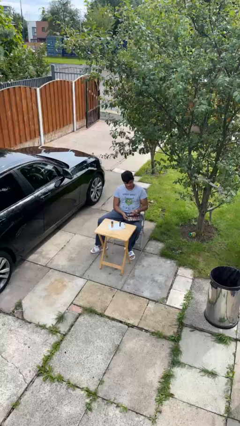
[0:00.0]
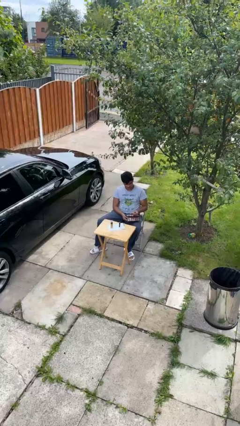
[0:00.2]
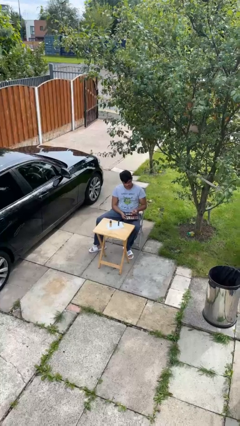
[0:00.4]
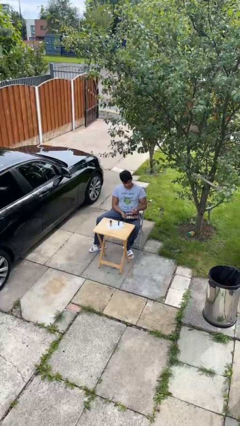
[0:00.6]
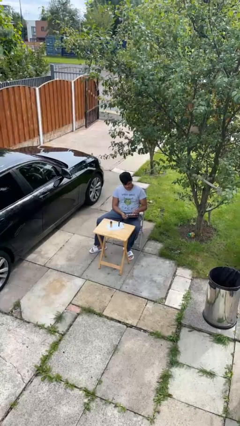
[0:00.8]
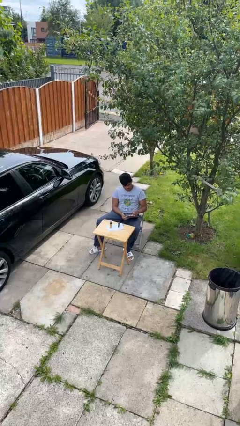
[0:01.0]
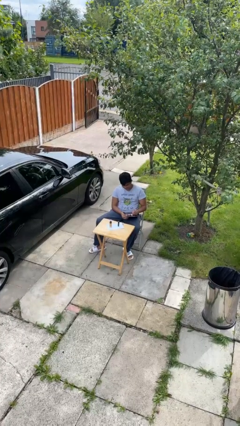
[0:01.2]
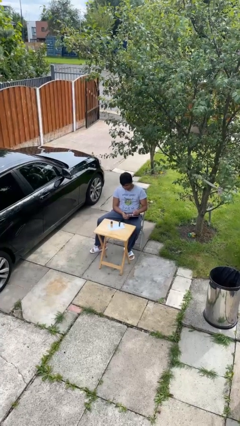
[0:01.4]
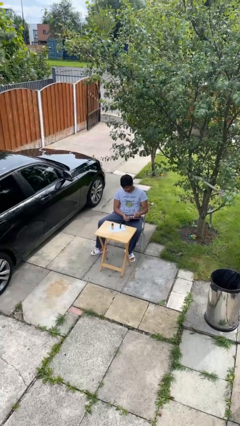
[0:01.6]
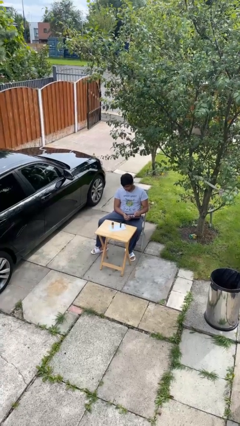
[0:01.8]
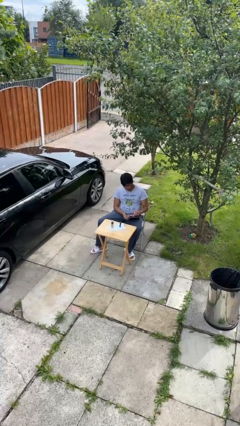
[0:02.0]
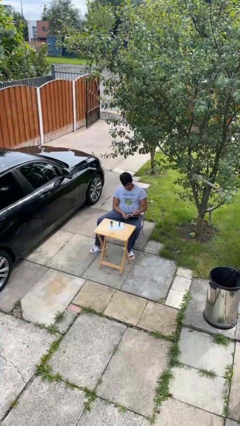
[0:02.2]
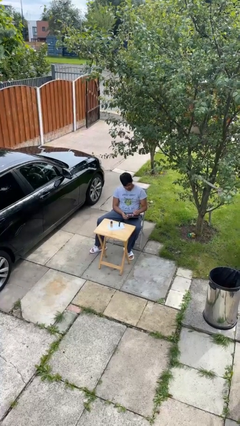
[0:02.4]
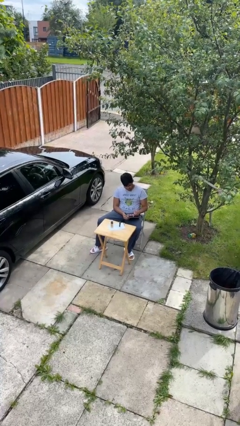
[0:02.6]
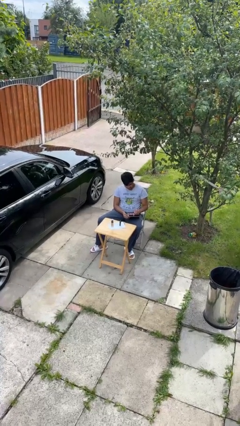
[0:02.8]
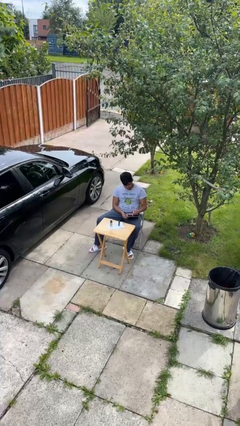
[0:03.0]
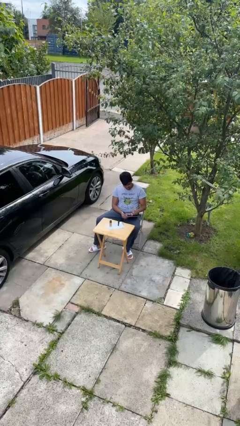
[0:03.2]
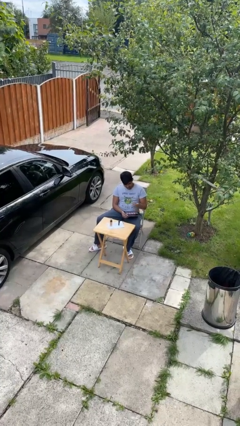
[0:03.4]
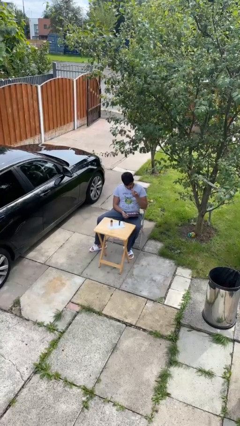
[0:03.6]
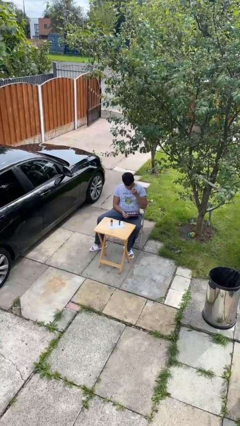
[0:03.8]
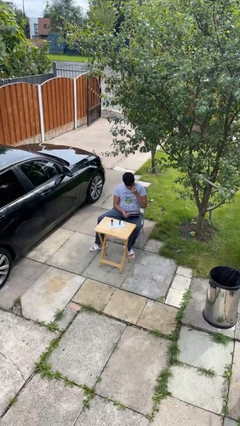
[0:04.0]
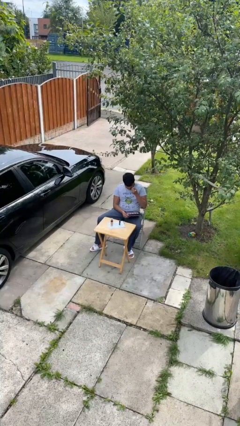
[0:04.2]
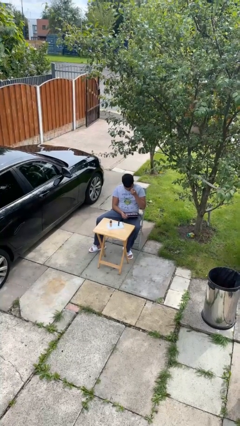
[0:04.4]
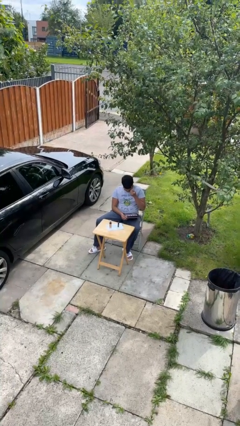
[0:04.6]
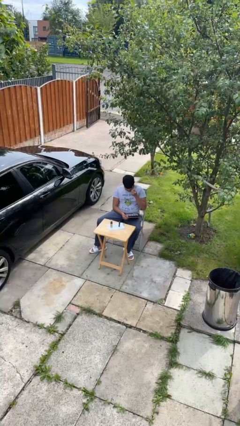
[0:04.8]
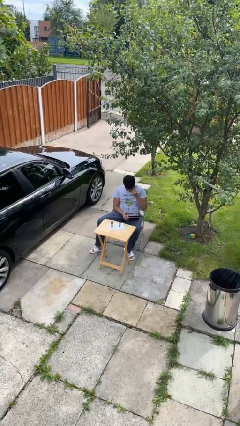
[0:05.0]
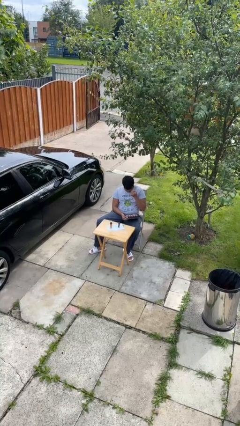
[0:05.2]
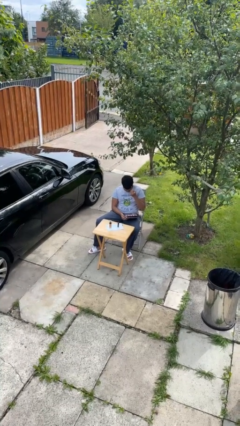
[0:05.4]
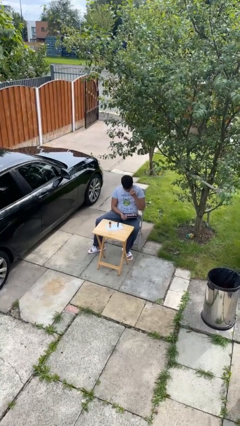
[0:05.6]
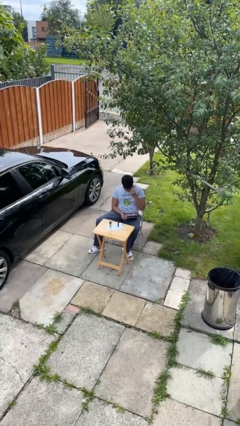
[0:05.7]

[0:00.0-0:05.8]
person applies eye makeup

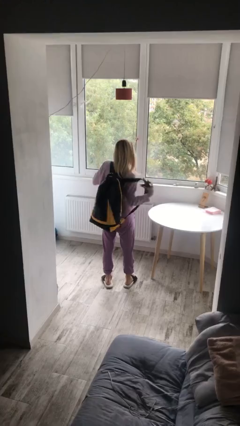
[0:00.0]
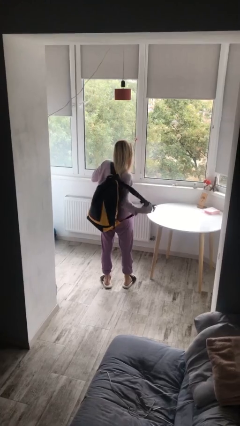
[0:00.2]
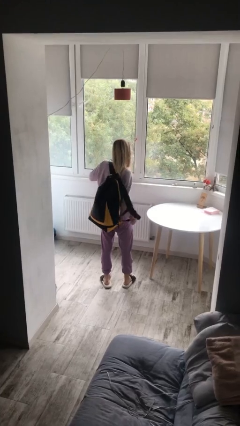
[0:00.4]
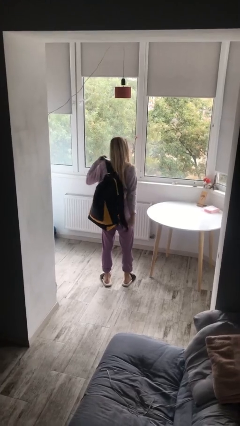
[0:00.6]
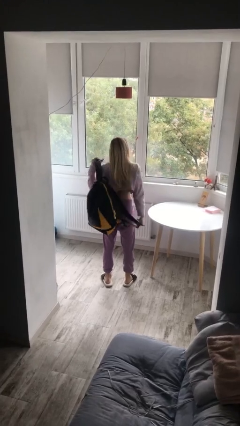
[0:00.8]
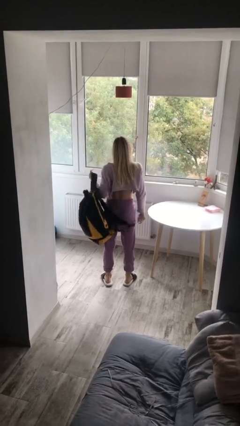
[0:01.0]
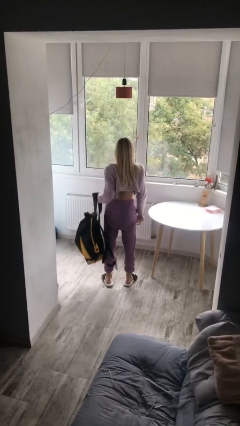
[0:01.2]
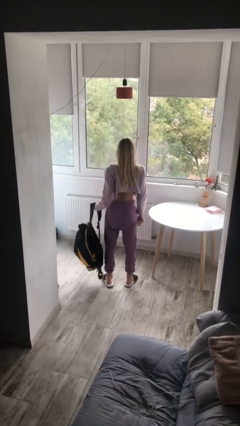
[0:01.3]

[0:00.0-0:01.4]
person takes off backpack

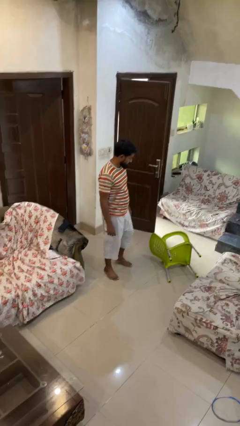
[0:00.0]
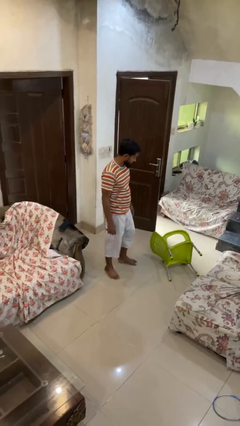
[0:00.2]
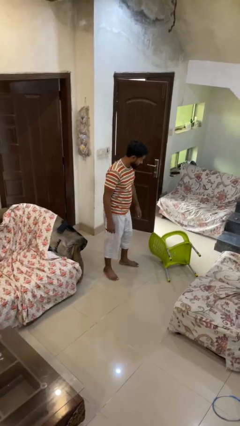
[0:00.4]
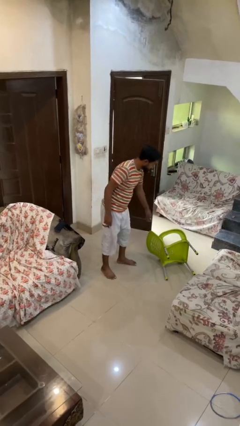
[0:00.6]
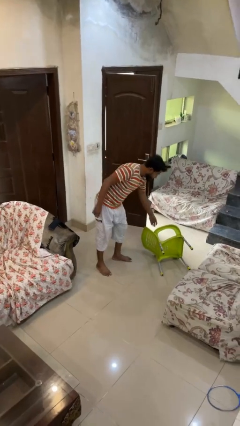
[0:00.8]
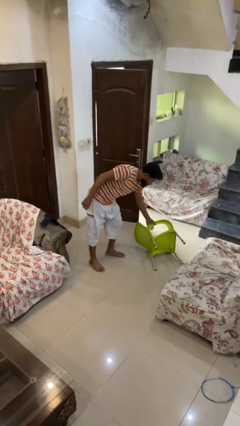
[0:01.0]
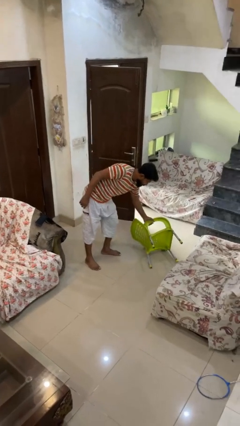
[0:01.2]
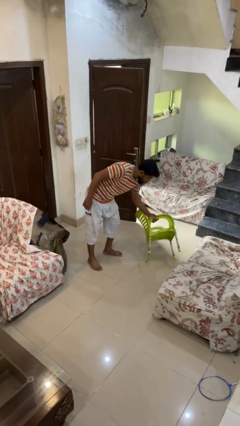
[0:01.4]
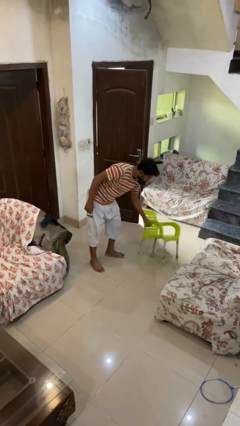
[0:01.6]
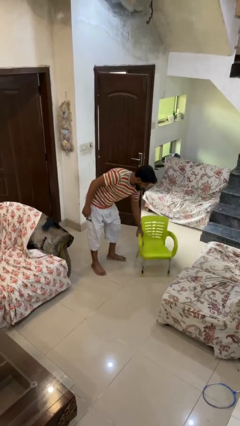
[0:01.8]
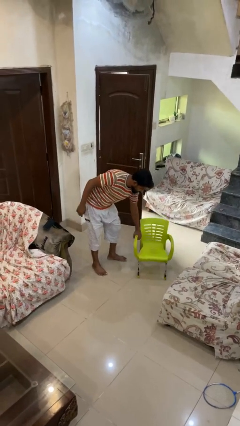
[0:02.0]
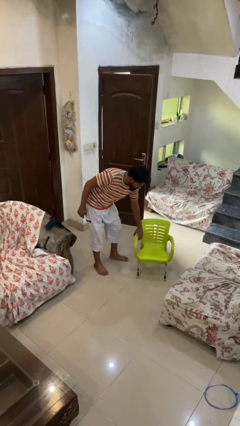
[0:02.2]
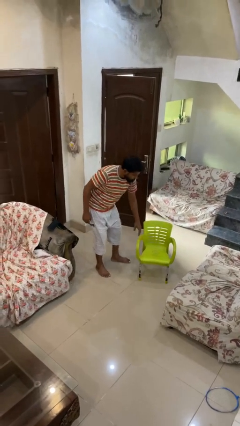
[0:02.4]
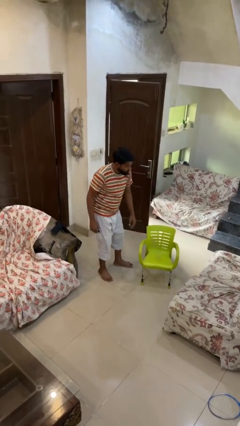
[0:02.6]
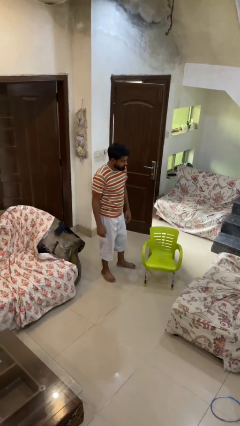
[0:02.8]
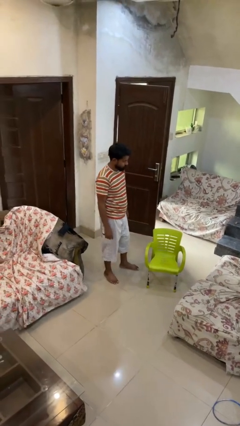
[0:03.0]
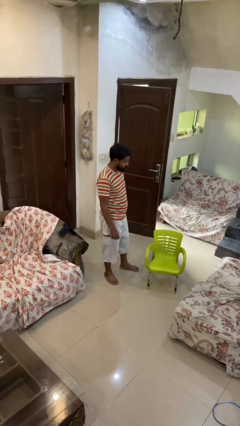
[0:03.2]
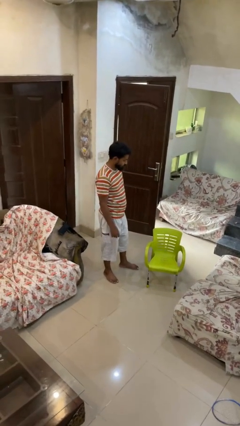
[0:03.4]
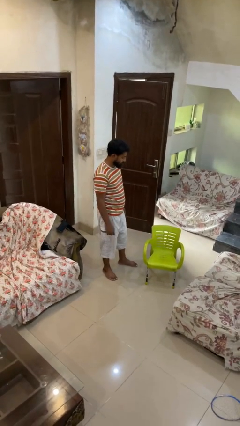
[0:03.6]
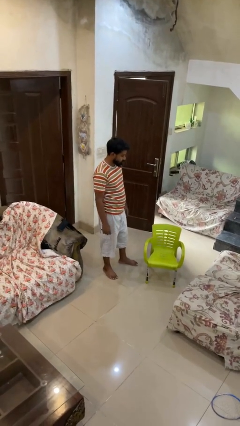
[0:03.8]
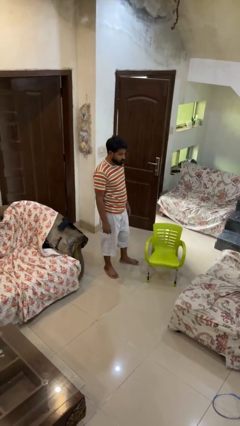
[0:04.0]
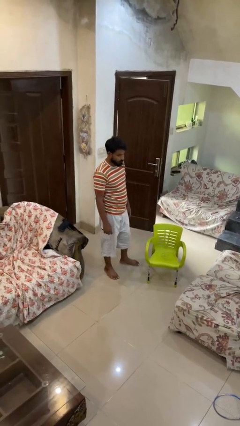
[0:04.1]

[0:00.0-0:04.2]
person sets upright furniture

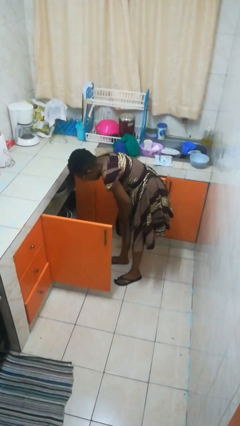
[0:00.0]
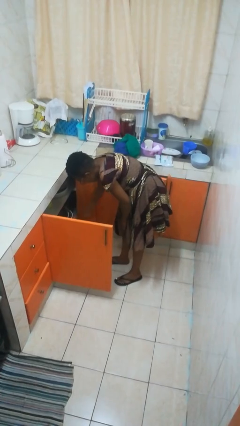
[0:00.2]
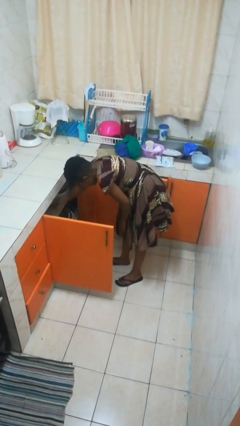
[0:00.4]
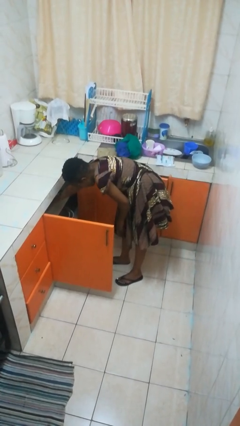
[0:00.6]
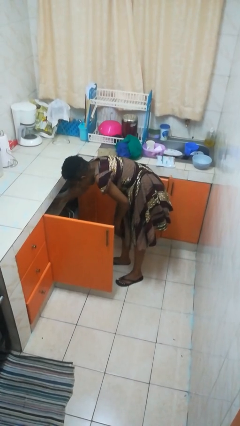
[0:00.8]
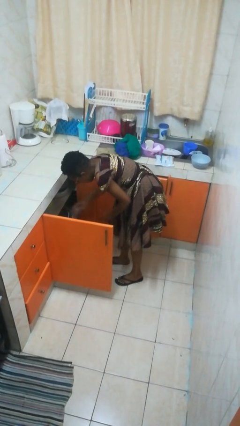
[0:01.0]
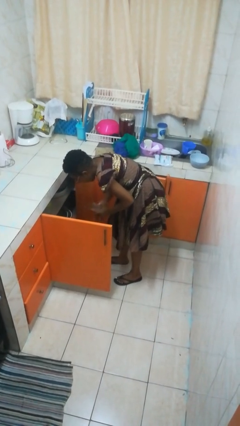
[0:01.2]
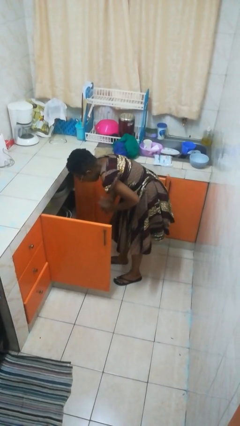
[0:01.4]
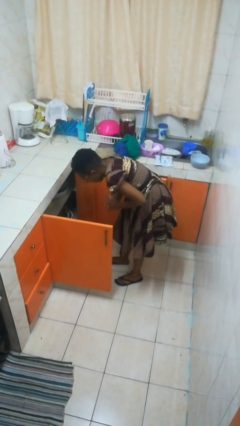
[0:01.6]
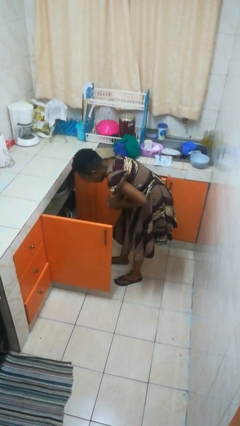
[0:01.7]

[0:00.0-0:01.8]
person takes object from cabinet

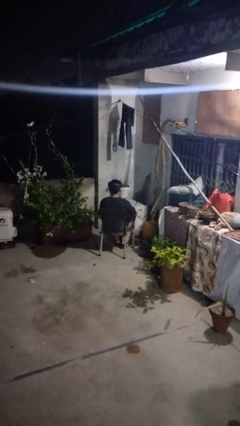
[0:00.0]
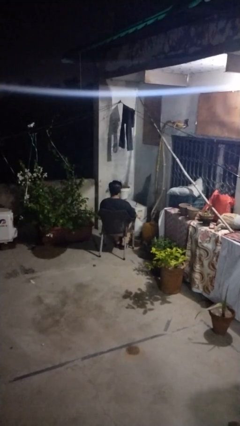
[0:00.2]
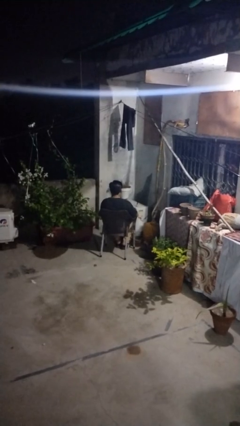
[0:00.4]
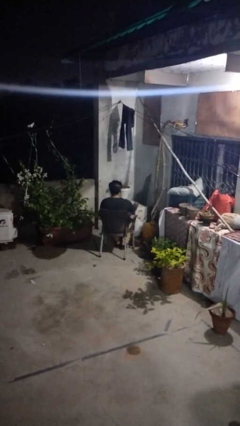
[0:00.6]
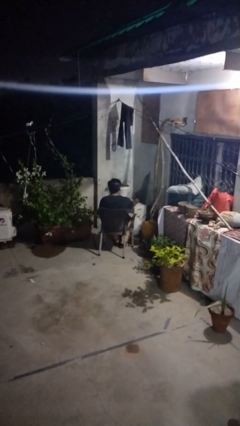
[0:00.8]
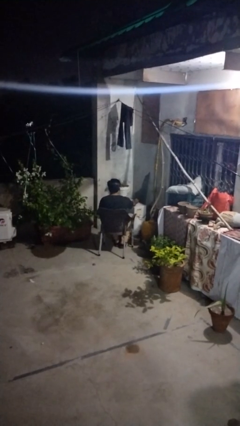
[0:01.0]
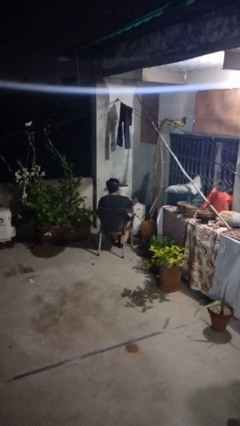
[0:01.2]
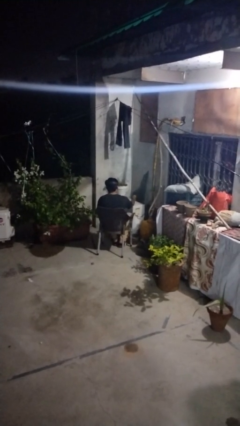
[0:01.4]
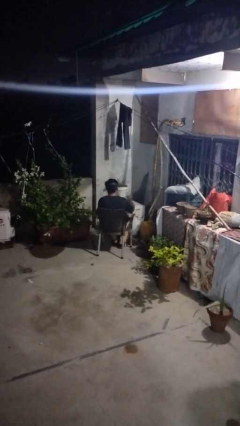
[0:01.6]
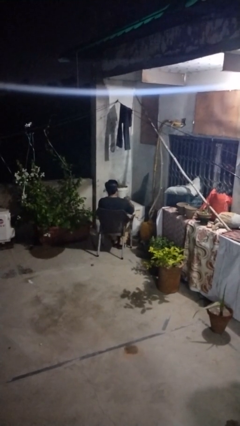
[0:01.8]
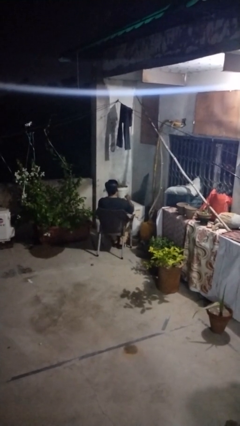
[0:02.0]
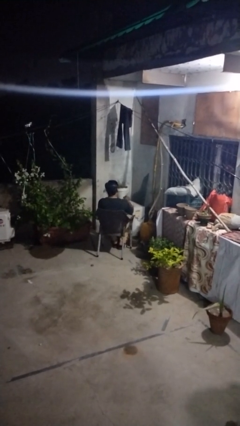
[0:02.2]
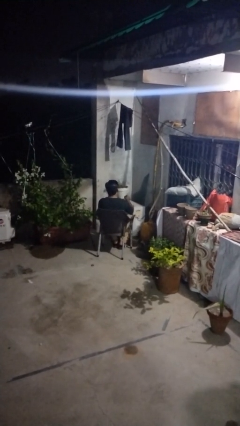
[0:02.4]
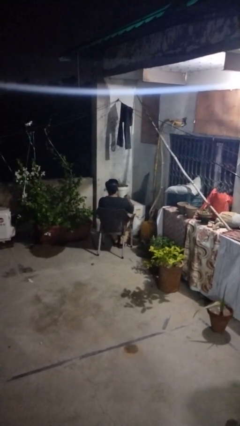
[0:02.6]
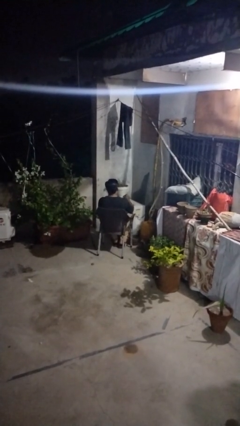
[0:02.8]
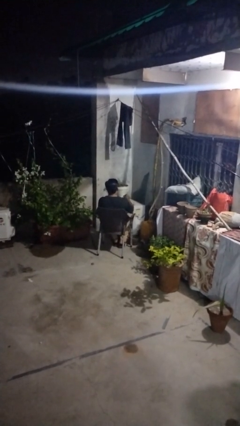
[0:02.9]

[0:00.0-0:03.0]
person paints fingernails

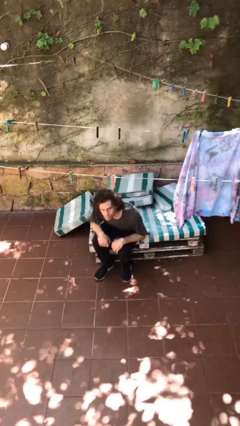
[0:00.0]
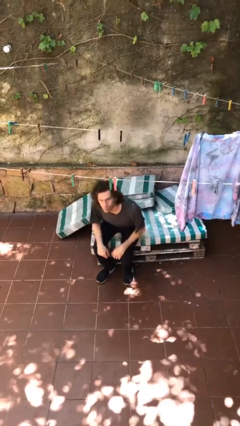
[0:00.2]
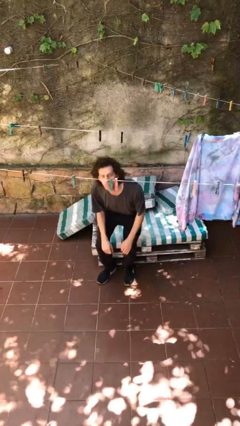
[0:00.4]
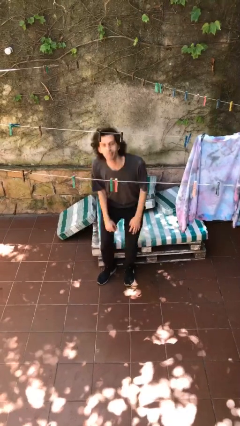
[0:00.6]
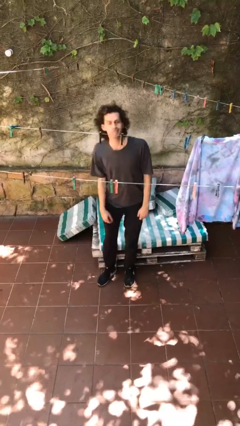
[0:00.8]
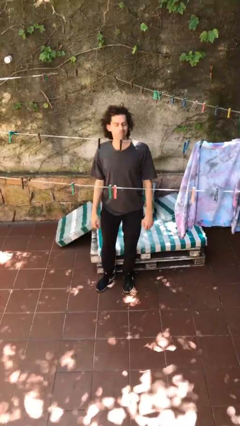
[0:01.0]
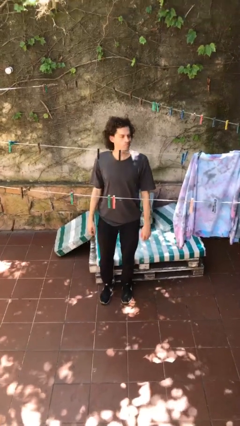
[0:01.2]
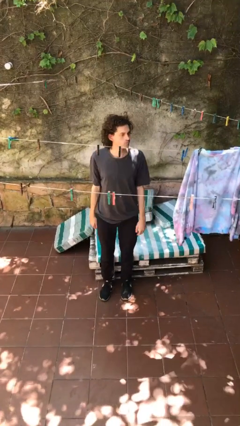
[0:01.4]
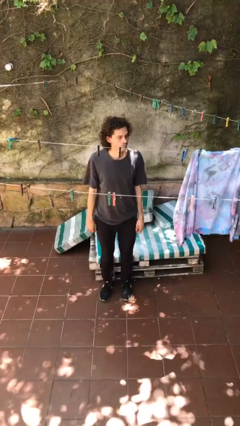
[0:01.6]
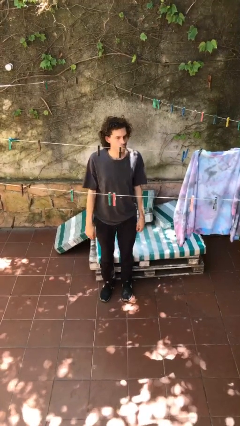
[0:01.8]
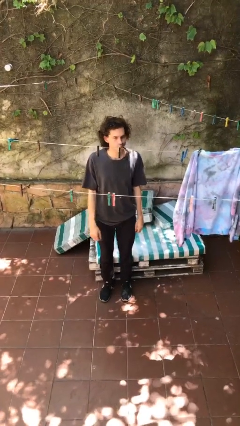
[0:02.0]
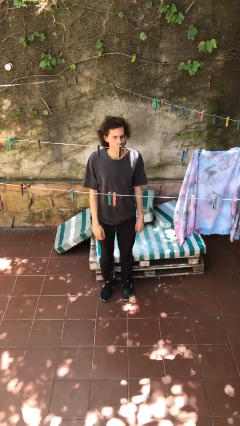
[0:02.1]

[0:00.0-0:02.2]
person stands up
